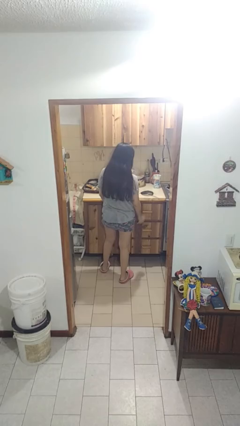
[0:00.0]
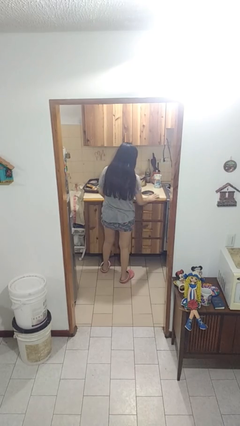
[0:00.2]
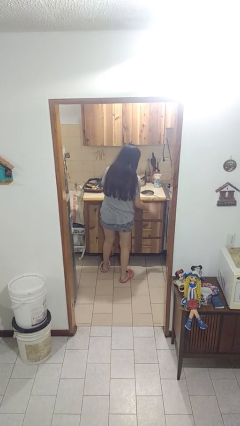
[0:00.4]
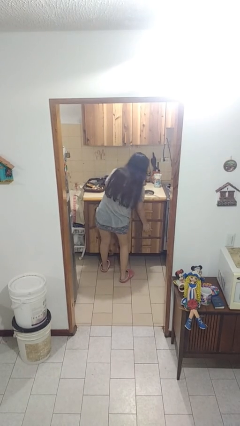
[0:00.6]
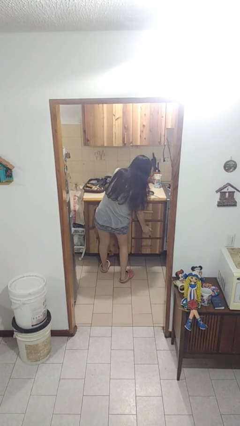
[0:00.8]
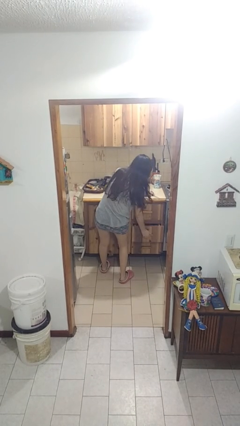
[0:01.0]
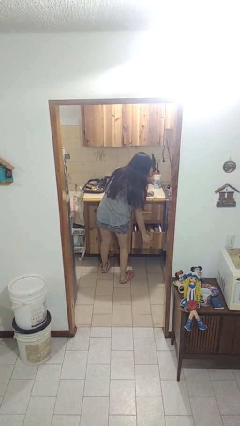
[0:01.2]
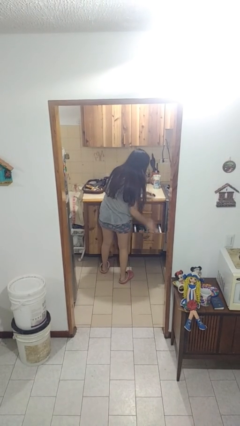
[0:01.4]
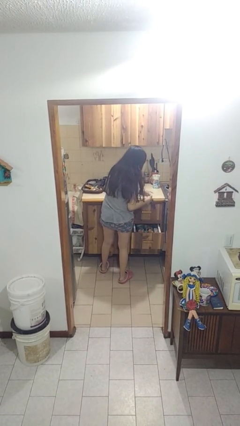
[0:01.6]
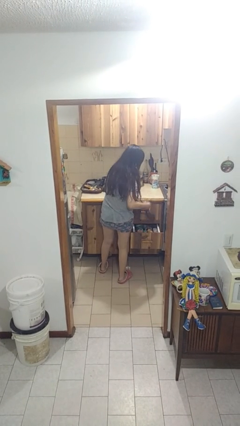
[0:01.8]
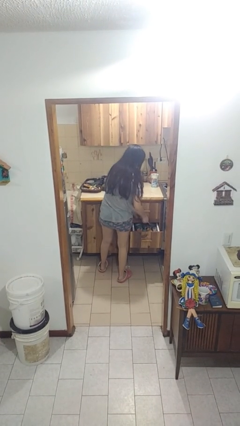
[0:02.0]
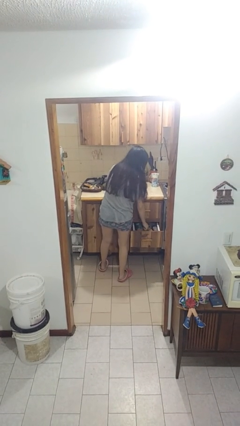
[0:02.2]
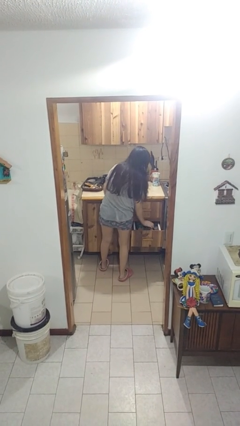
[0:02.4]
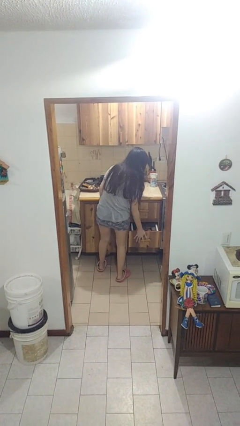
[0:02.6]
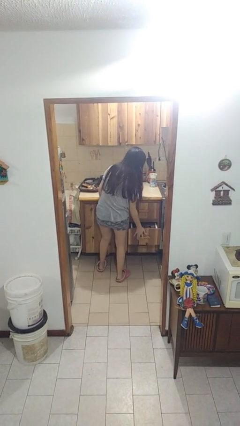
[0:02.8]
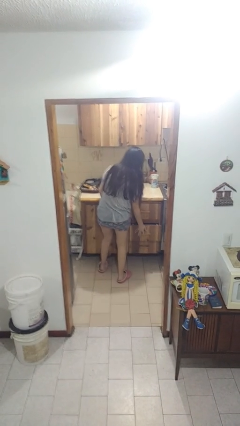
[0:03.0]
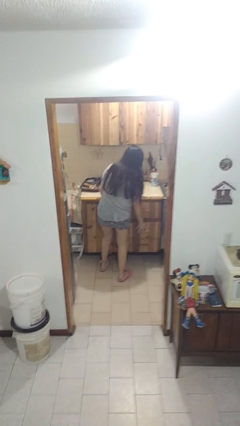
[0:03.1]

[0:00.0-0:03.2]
person puts object into kitchen drawer

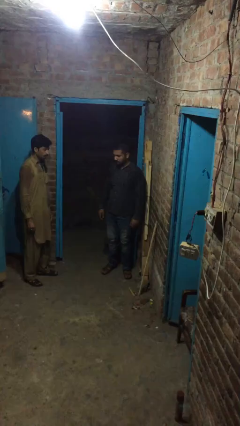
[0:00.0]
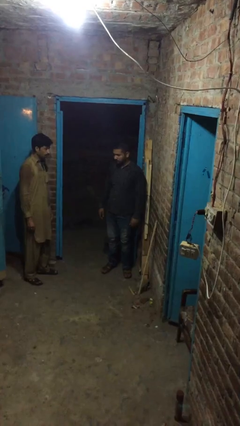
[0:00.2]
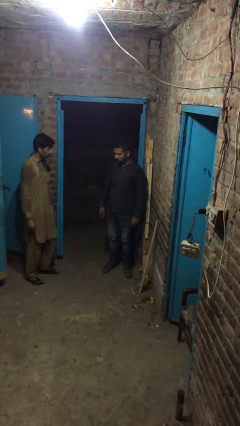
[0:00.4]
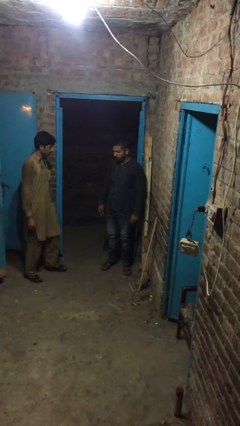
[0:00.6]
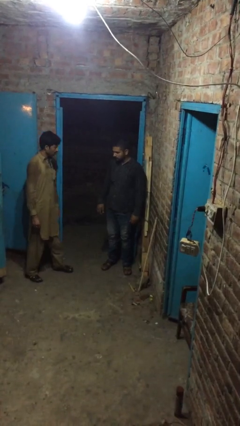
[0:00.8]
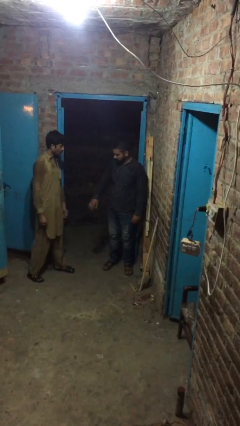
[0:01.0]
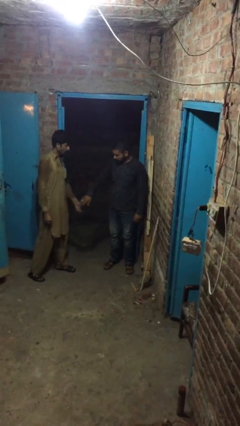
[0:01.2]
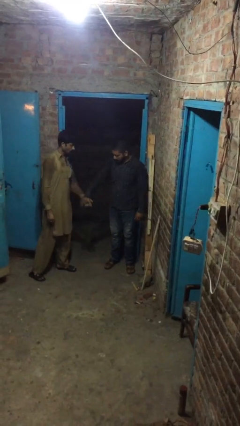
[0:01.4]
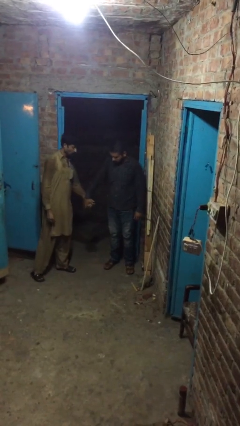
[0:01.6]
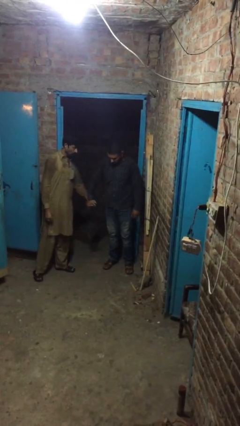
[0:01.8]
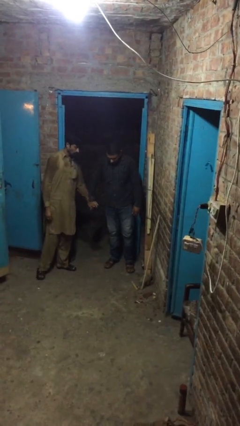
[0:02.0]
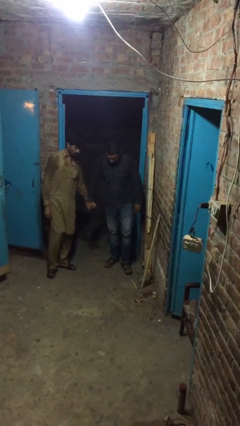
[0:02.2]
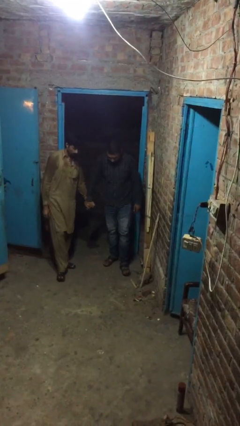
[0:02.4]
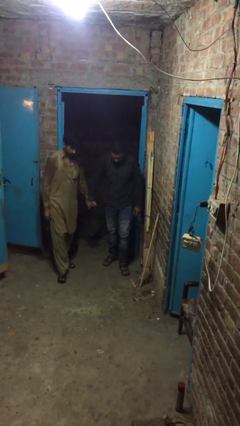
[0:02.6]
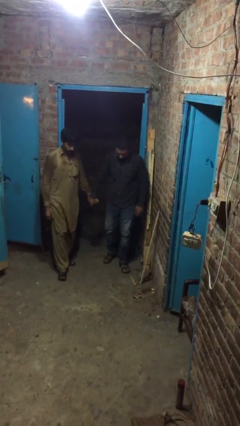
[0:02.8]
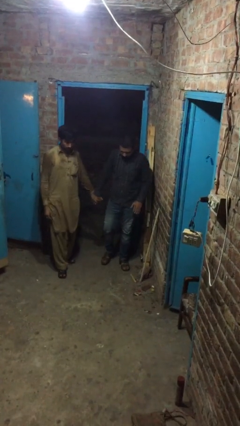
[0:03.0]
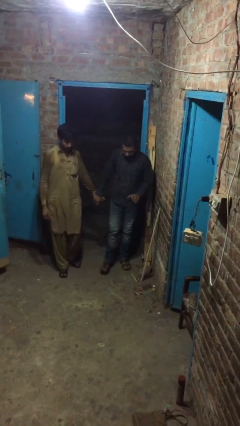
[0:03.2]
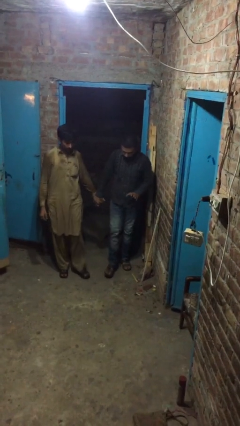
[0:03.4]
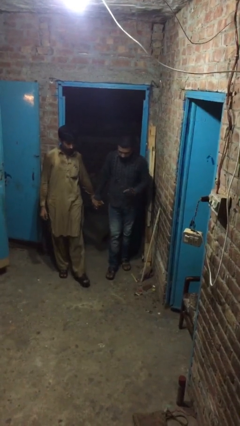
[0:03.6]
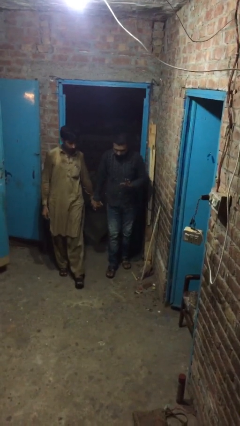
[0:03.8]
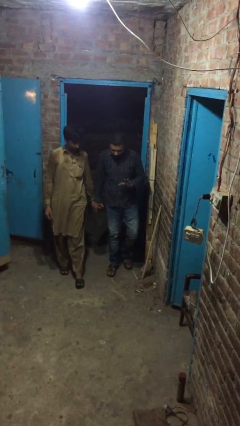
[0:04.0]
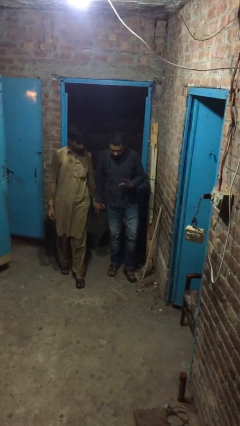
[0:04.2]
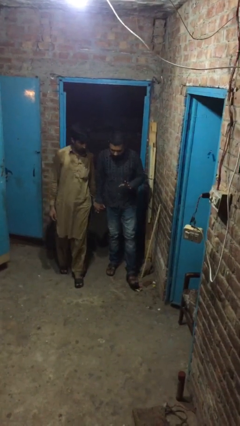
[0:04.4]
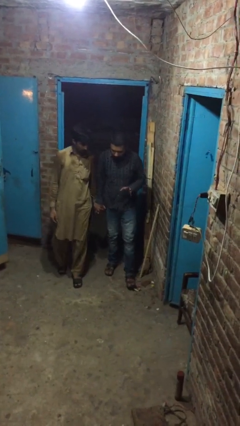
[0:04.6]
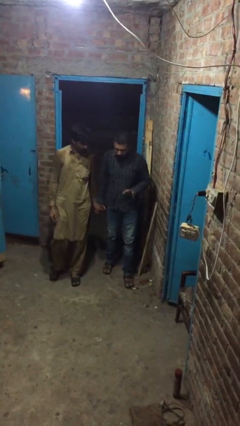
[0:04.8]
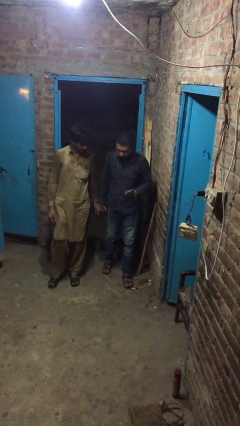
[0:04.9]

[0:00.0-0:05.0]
person holds hand

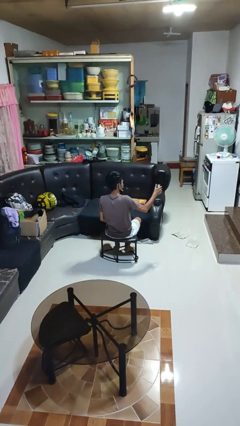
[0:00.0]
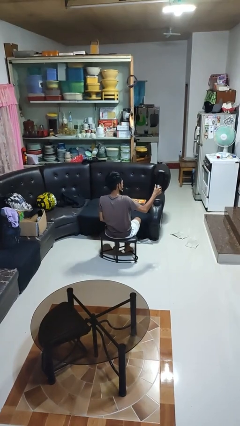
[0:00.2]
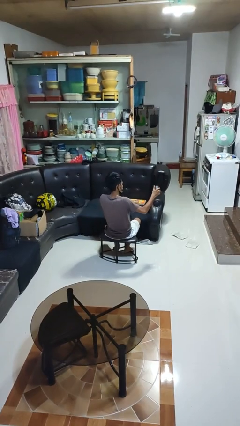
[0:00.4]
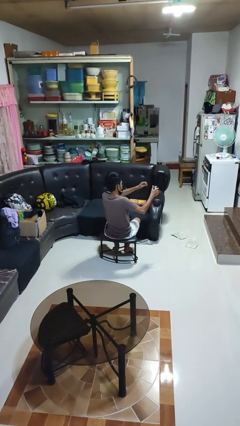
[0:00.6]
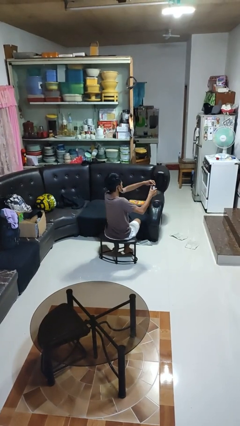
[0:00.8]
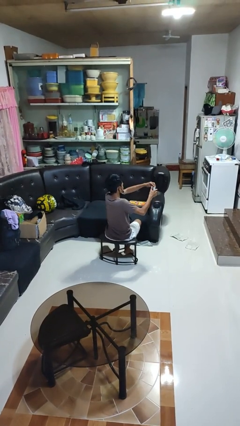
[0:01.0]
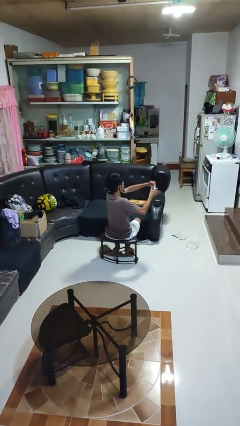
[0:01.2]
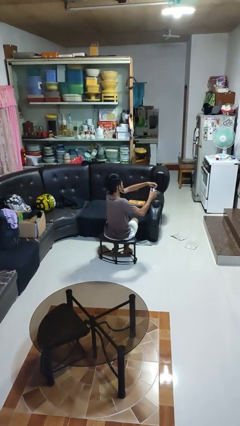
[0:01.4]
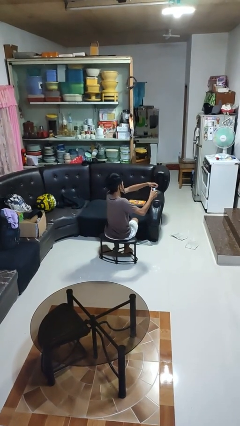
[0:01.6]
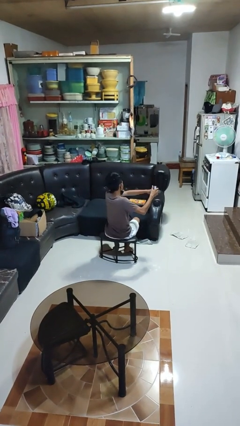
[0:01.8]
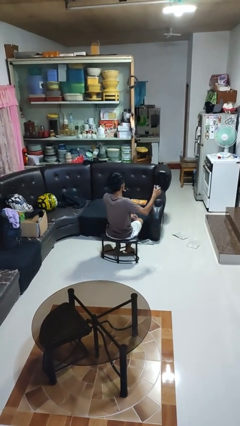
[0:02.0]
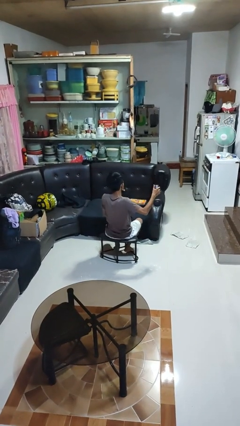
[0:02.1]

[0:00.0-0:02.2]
person opens beverage can

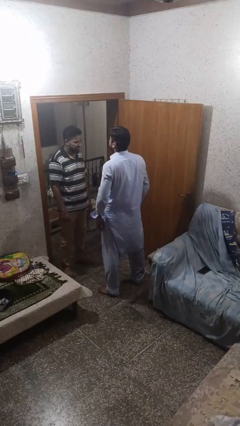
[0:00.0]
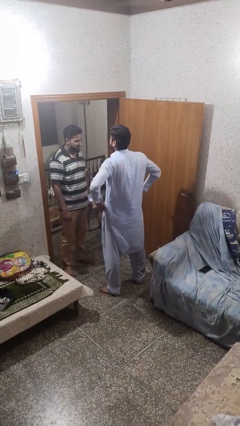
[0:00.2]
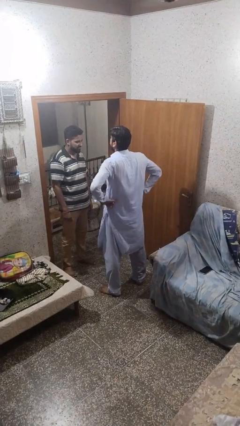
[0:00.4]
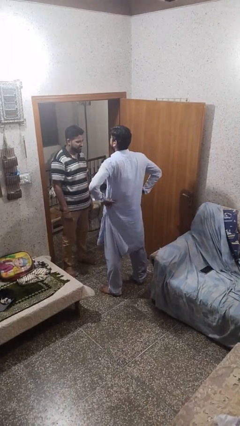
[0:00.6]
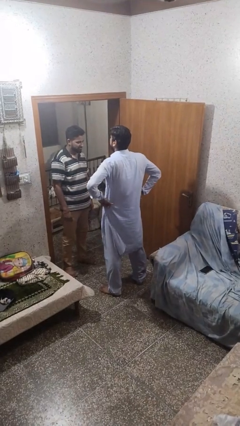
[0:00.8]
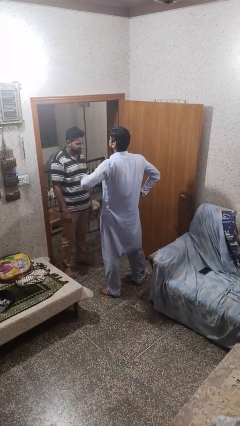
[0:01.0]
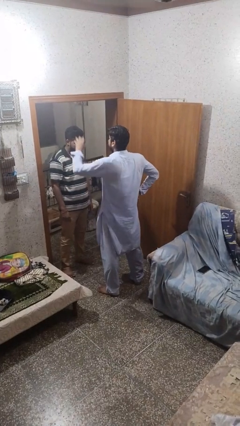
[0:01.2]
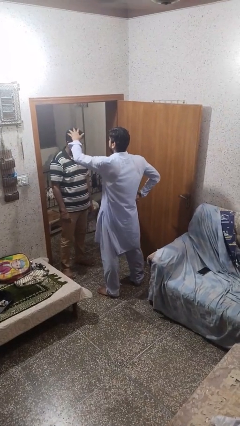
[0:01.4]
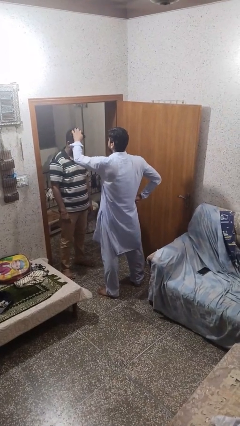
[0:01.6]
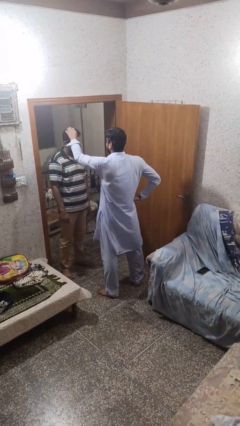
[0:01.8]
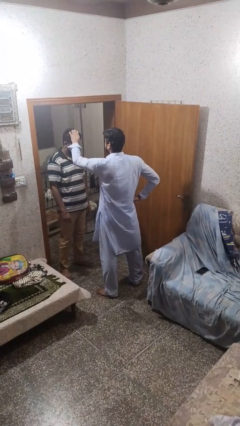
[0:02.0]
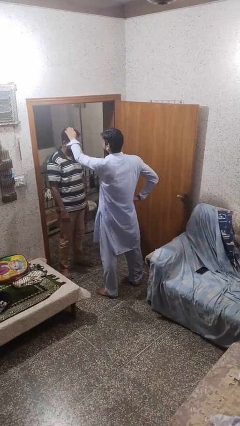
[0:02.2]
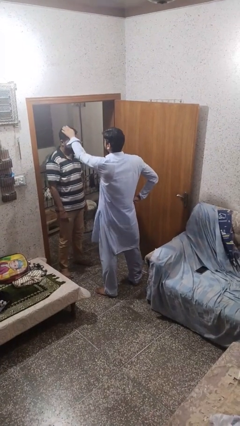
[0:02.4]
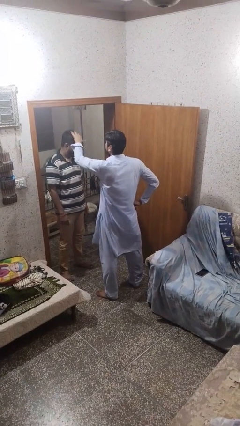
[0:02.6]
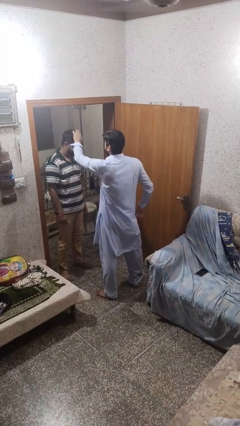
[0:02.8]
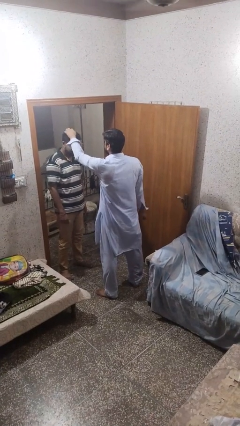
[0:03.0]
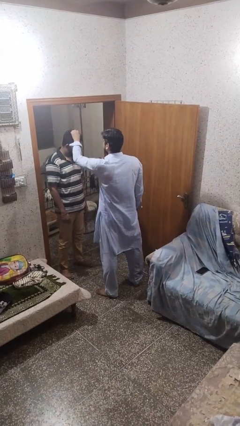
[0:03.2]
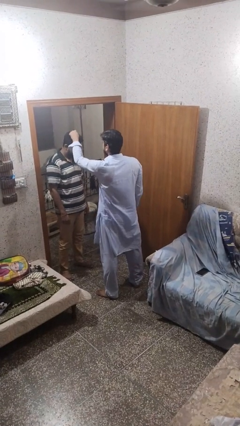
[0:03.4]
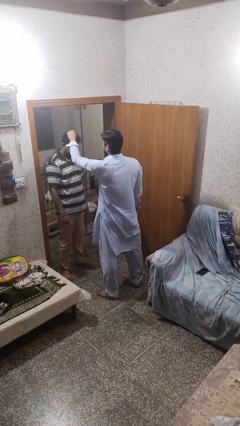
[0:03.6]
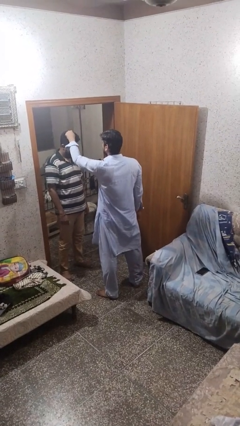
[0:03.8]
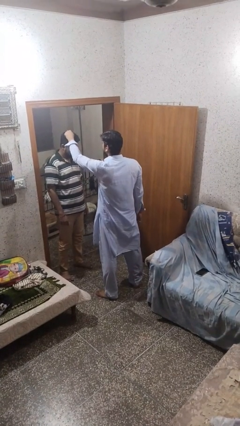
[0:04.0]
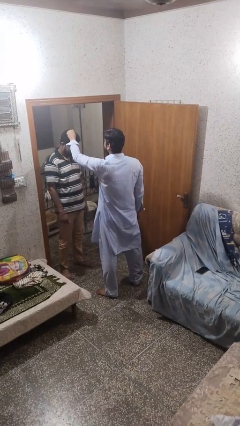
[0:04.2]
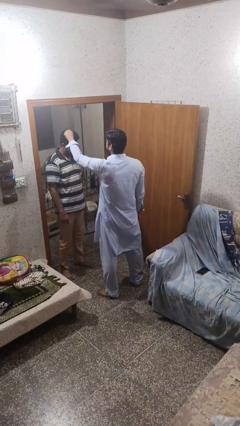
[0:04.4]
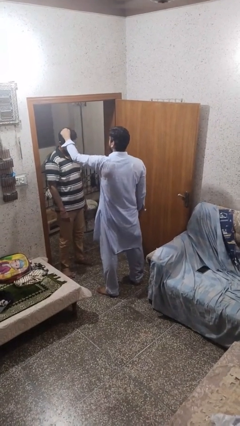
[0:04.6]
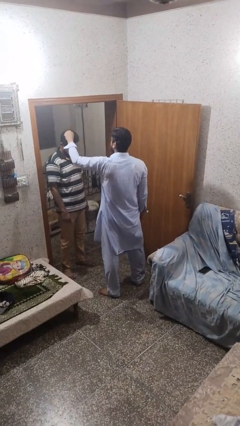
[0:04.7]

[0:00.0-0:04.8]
person grabs person by hair

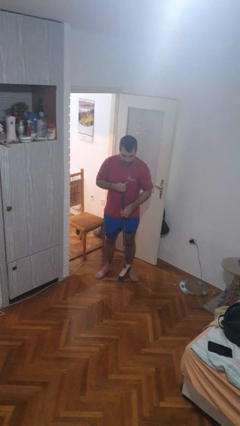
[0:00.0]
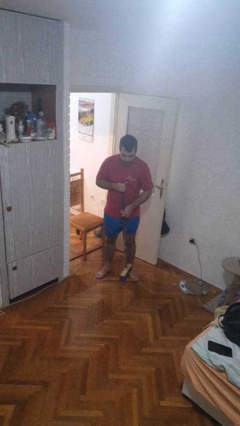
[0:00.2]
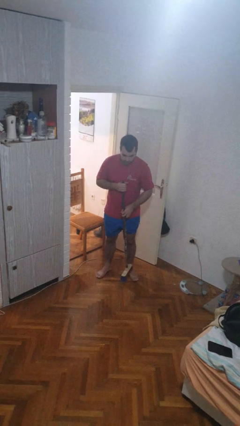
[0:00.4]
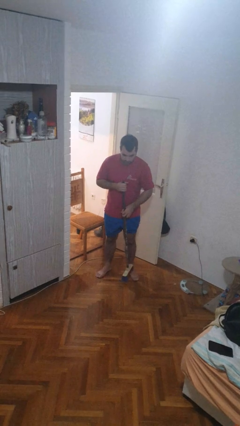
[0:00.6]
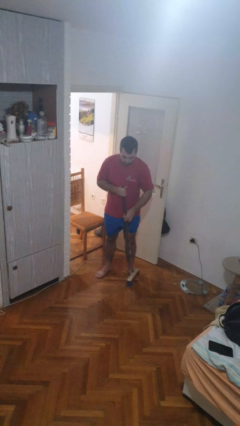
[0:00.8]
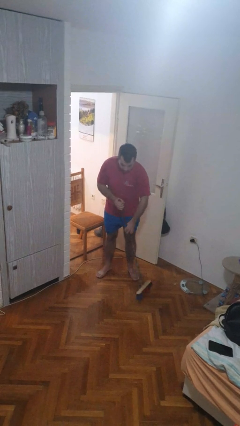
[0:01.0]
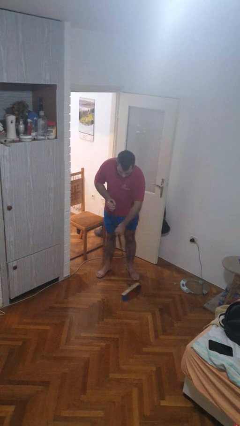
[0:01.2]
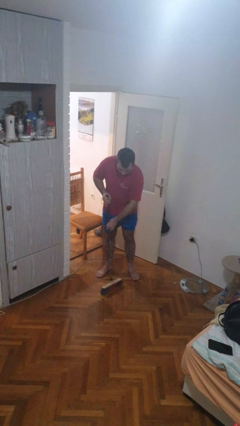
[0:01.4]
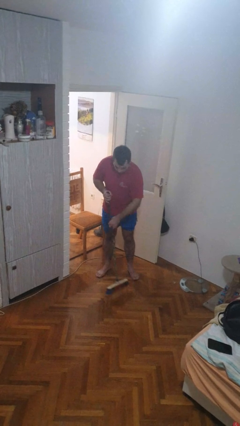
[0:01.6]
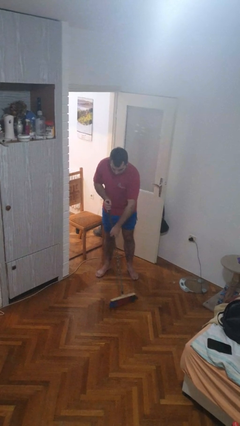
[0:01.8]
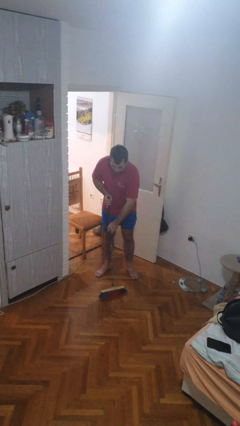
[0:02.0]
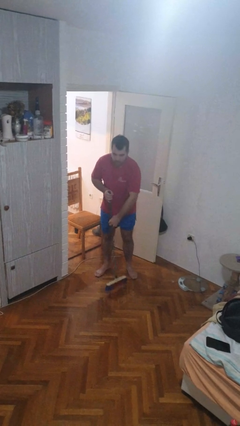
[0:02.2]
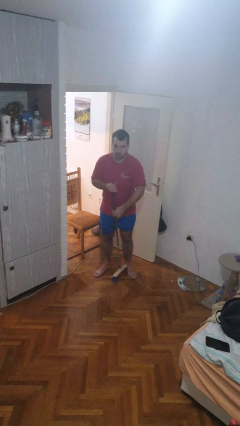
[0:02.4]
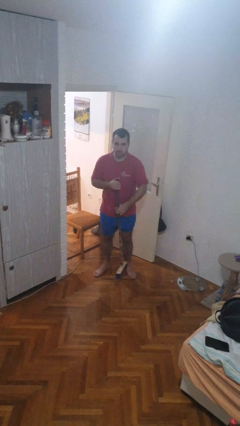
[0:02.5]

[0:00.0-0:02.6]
person sweeps floor
